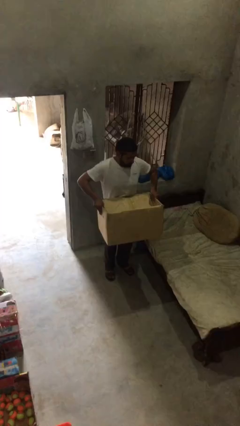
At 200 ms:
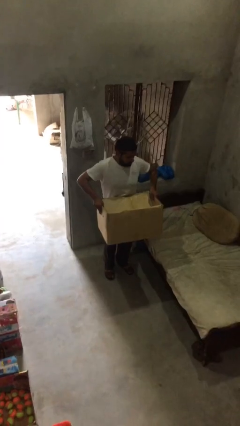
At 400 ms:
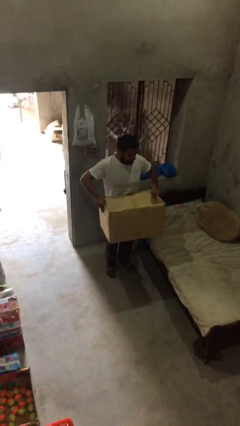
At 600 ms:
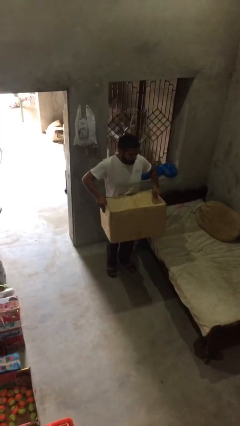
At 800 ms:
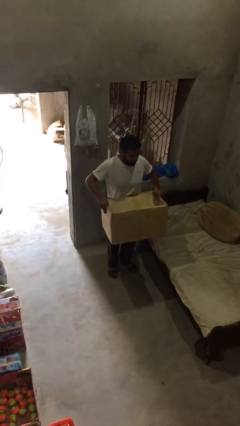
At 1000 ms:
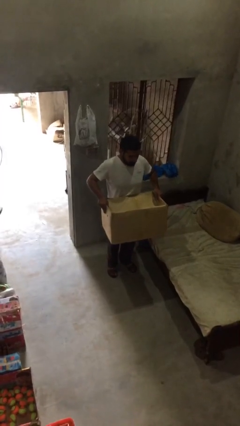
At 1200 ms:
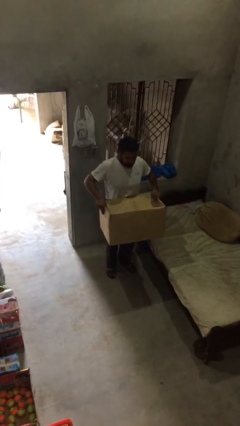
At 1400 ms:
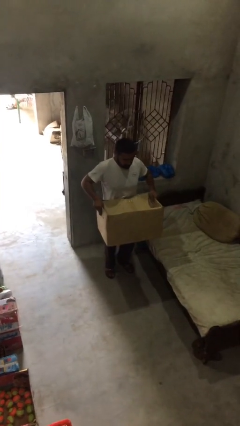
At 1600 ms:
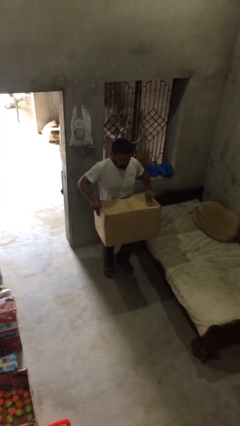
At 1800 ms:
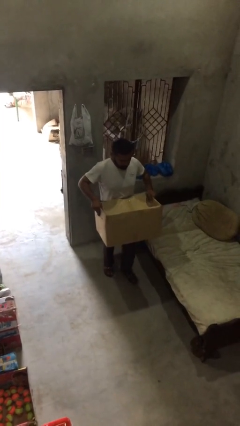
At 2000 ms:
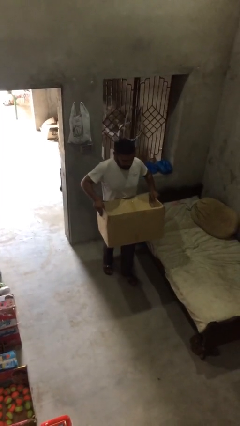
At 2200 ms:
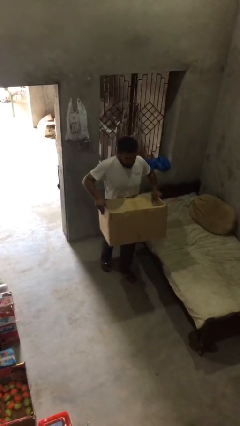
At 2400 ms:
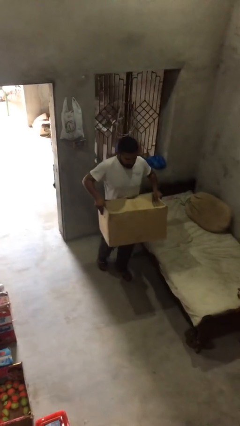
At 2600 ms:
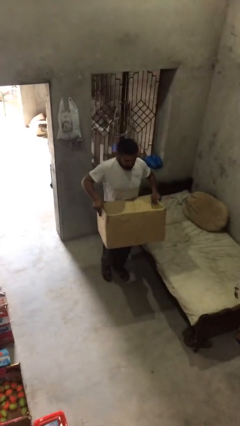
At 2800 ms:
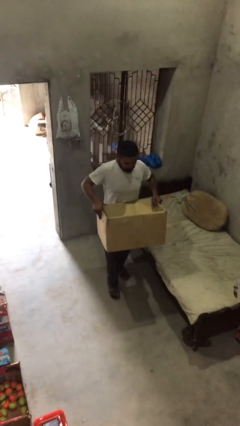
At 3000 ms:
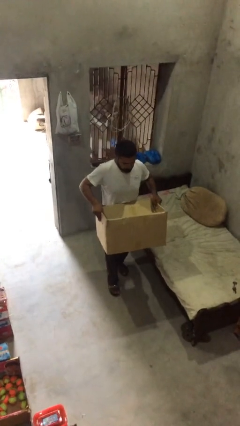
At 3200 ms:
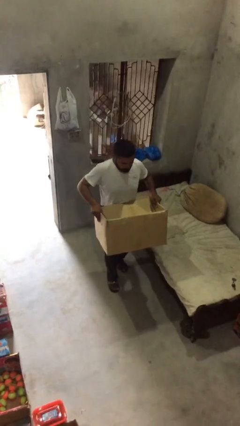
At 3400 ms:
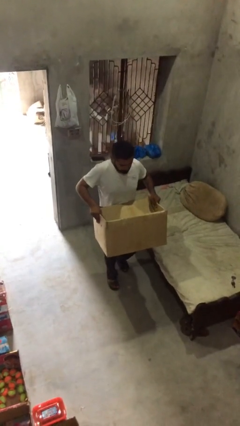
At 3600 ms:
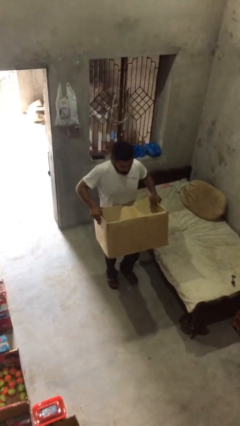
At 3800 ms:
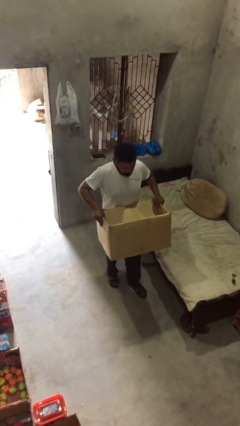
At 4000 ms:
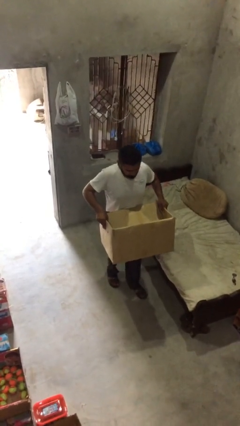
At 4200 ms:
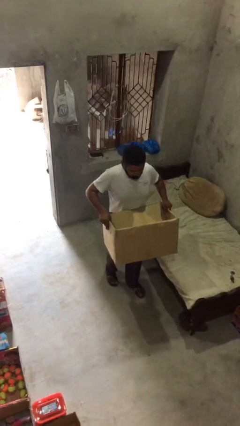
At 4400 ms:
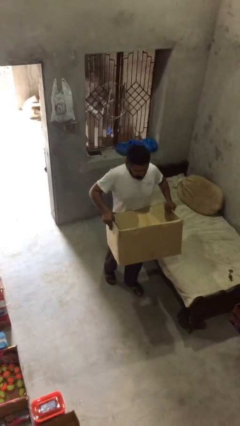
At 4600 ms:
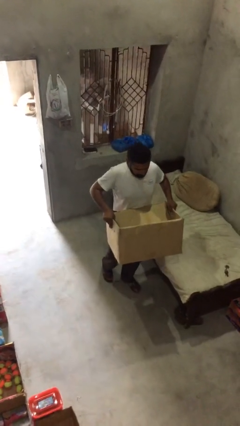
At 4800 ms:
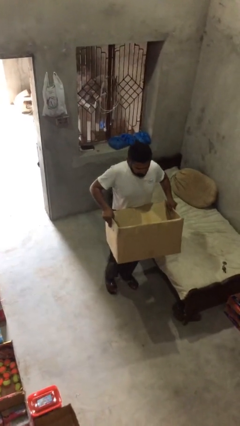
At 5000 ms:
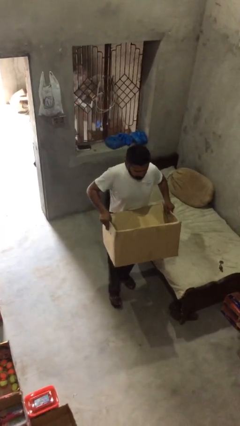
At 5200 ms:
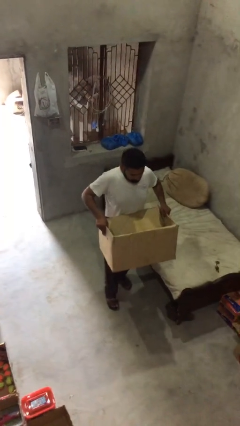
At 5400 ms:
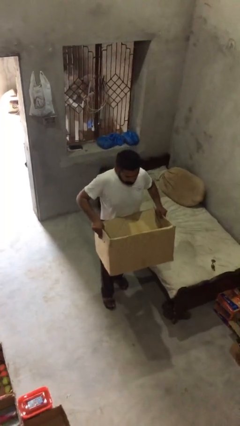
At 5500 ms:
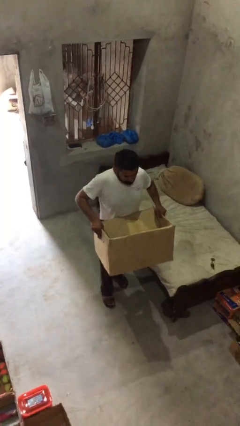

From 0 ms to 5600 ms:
person carries heavy object

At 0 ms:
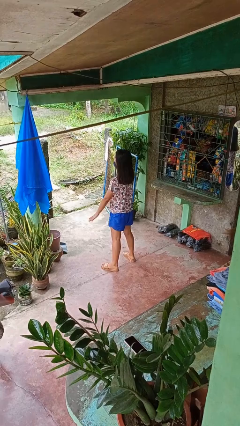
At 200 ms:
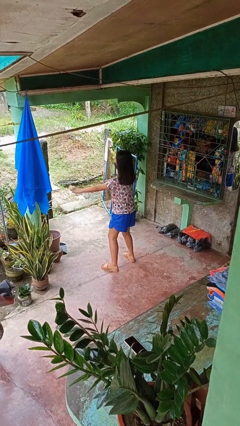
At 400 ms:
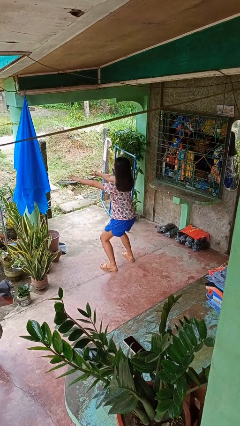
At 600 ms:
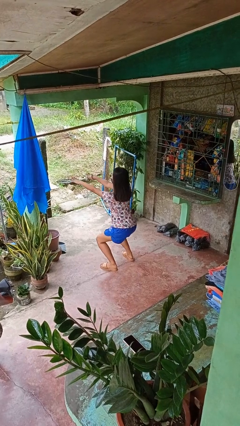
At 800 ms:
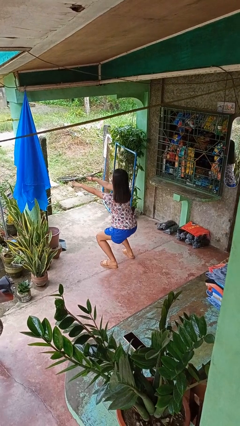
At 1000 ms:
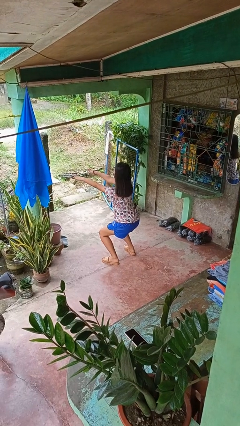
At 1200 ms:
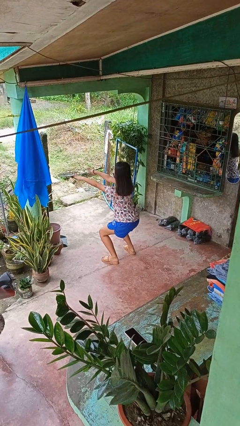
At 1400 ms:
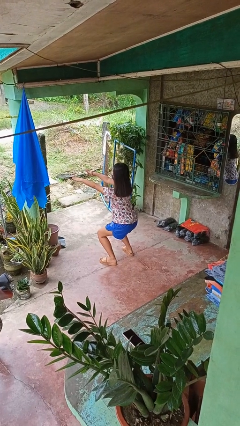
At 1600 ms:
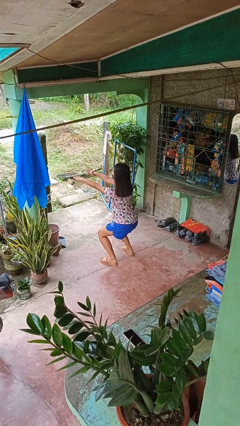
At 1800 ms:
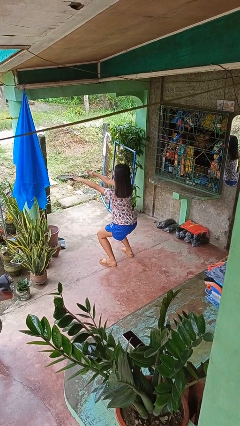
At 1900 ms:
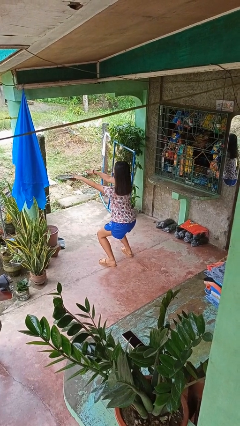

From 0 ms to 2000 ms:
person squats

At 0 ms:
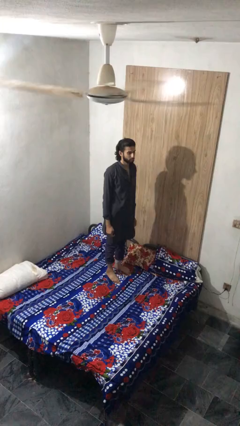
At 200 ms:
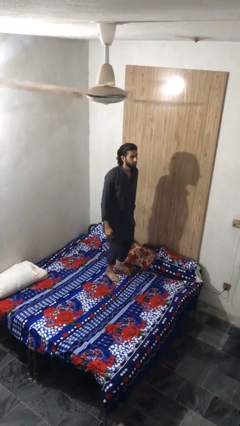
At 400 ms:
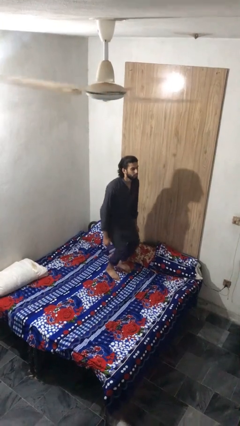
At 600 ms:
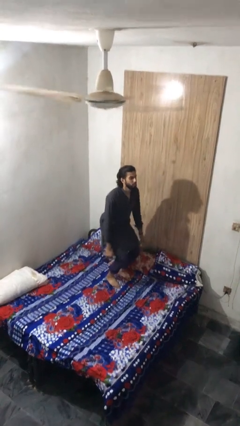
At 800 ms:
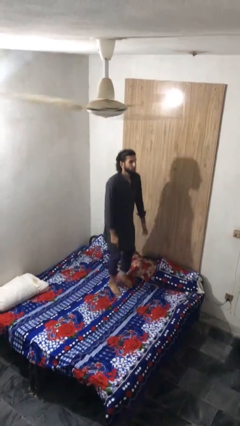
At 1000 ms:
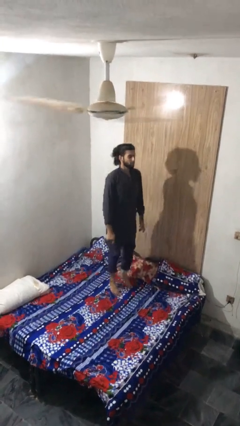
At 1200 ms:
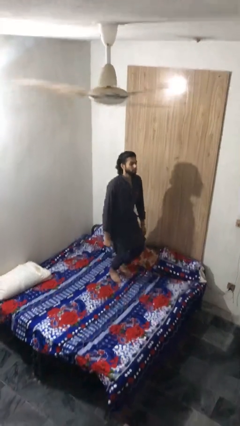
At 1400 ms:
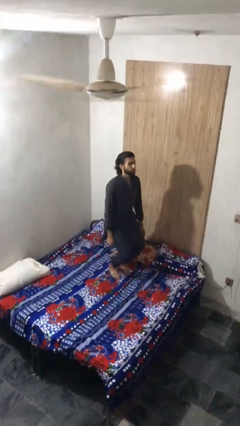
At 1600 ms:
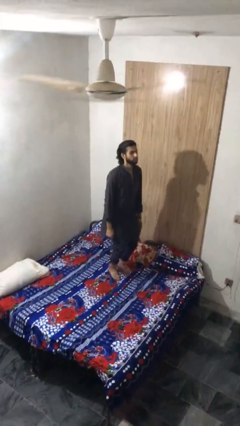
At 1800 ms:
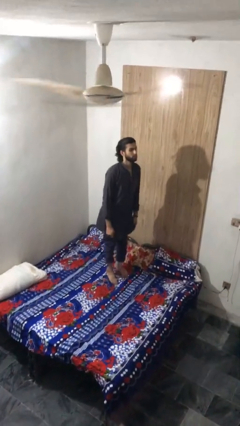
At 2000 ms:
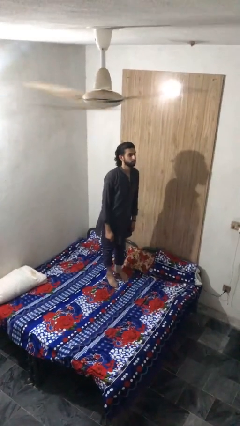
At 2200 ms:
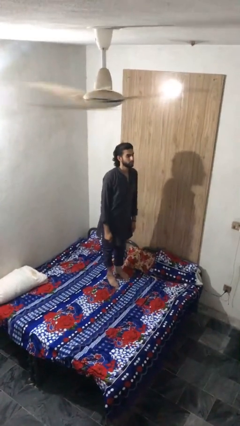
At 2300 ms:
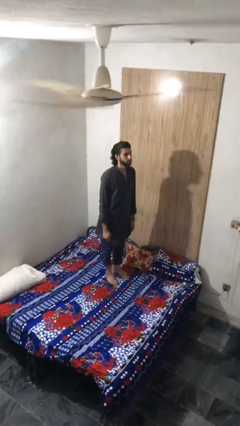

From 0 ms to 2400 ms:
person jumps on bed

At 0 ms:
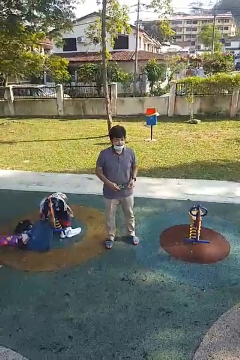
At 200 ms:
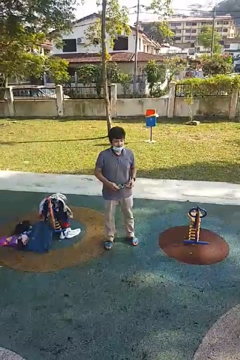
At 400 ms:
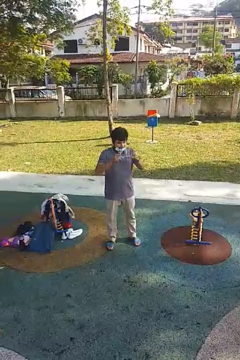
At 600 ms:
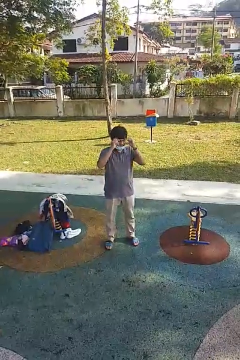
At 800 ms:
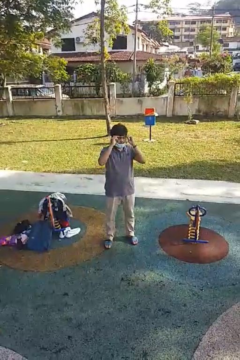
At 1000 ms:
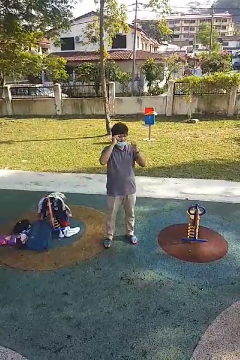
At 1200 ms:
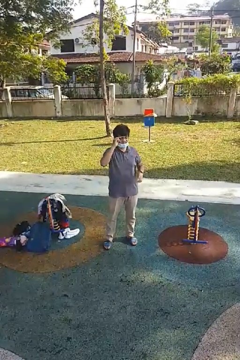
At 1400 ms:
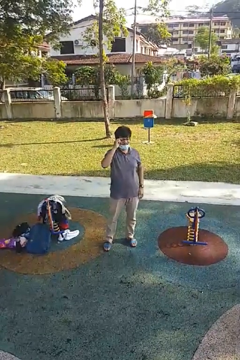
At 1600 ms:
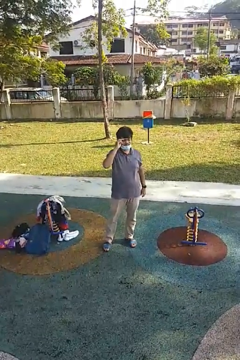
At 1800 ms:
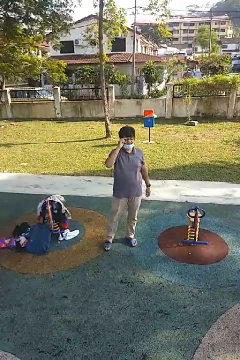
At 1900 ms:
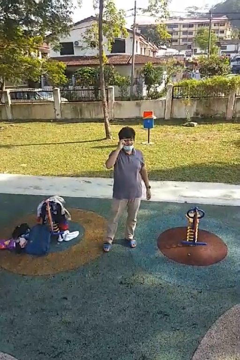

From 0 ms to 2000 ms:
person puts on glasses

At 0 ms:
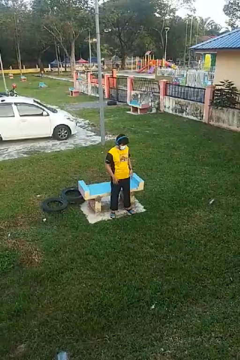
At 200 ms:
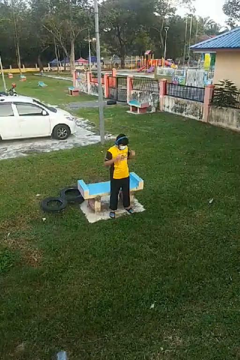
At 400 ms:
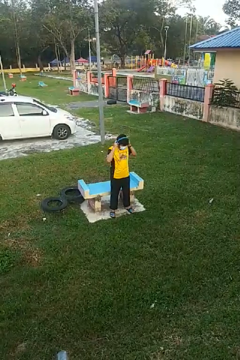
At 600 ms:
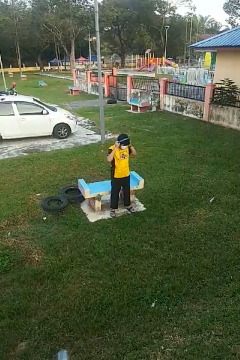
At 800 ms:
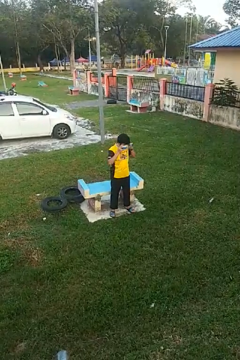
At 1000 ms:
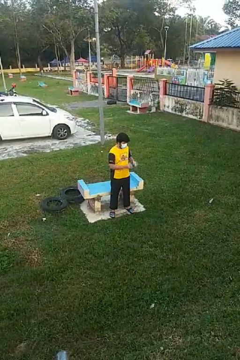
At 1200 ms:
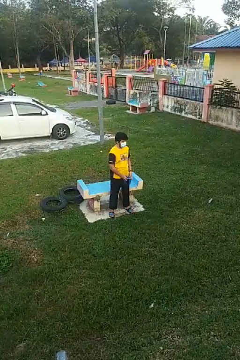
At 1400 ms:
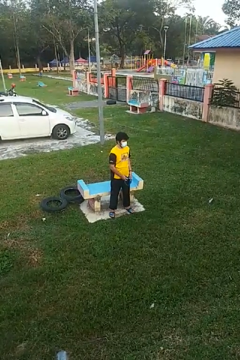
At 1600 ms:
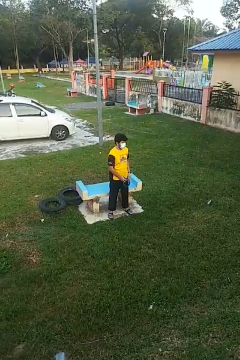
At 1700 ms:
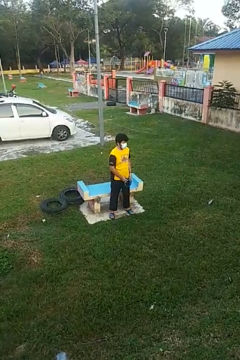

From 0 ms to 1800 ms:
person takes off headphones

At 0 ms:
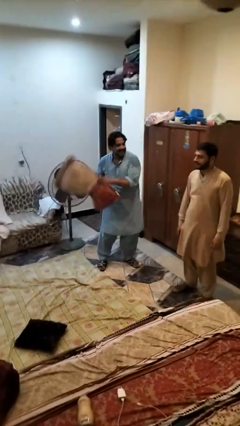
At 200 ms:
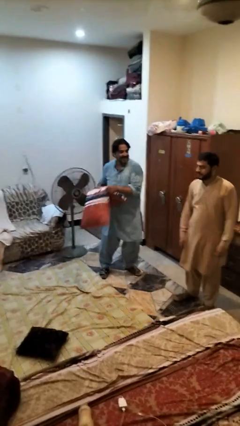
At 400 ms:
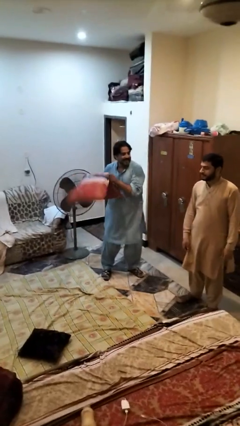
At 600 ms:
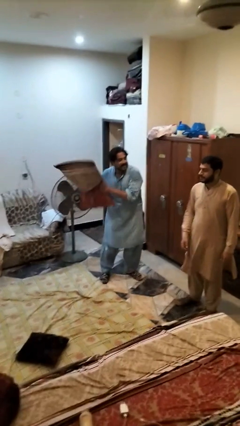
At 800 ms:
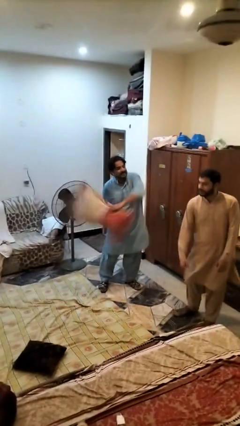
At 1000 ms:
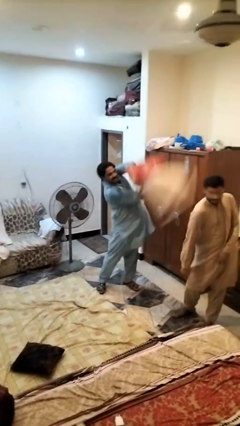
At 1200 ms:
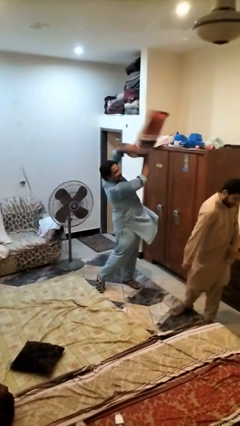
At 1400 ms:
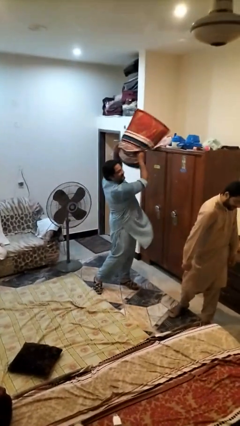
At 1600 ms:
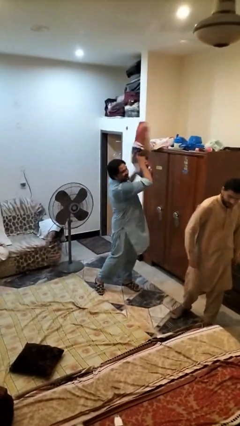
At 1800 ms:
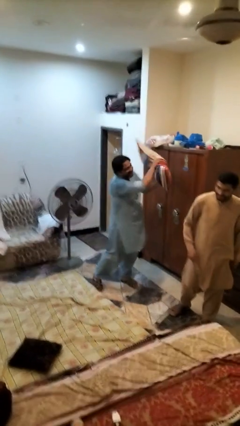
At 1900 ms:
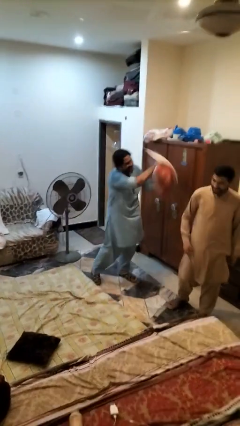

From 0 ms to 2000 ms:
person hits person with pillow

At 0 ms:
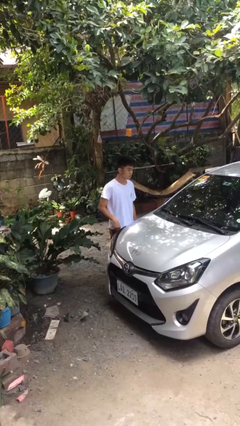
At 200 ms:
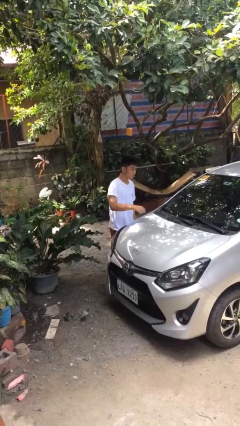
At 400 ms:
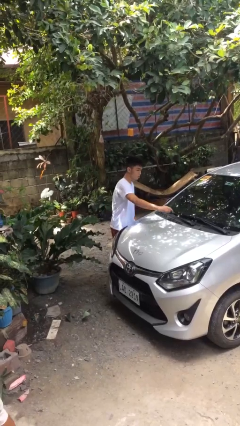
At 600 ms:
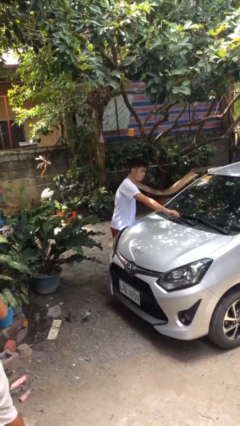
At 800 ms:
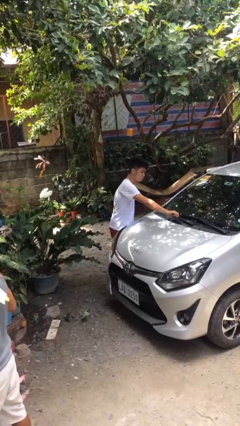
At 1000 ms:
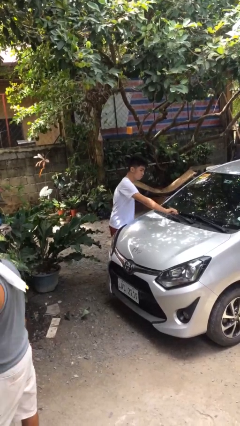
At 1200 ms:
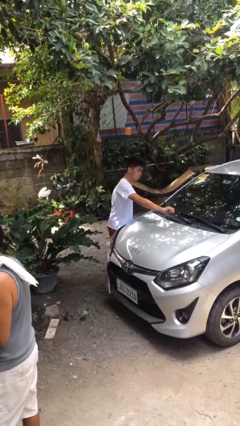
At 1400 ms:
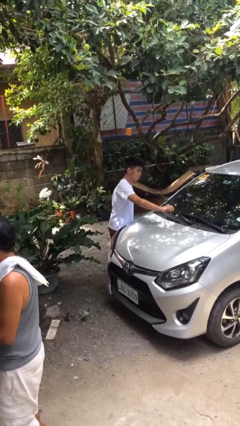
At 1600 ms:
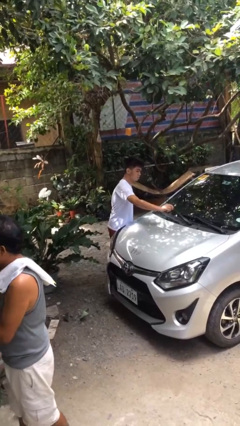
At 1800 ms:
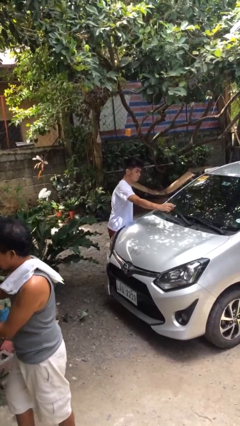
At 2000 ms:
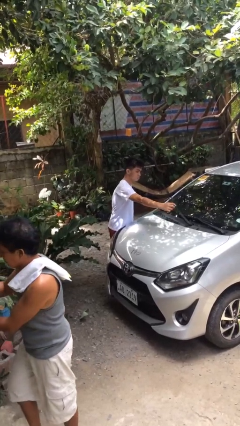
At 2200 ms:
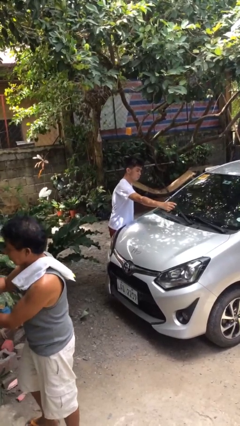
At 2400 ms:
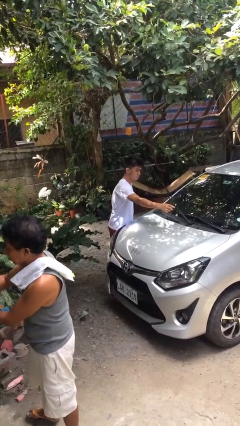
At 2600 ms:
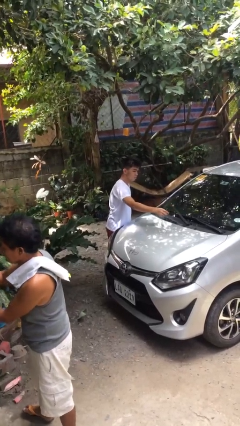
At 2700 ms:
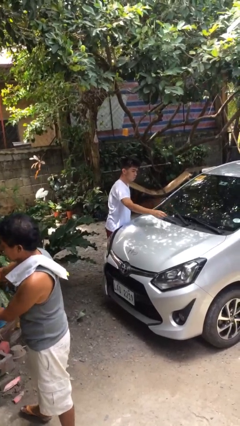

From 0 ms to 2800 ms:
person flips up car wipers
